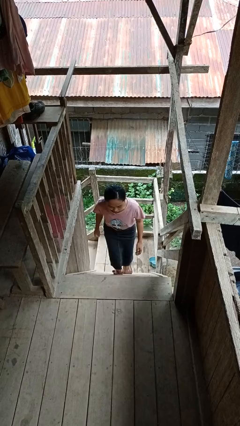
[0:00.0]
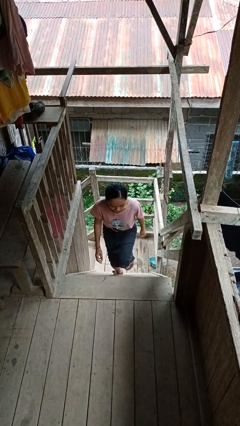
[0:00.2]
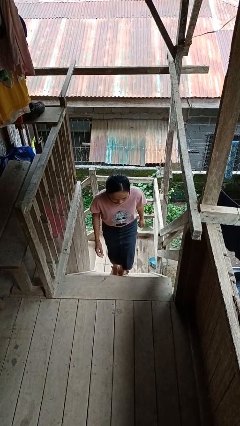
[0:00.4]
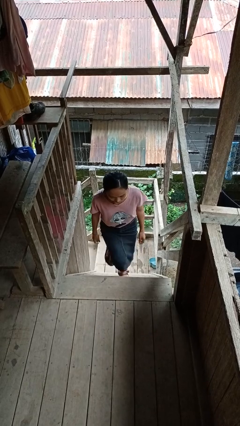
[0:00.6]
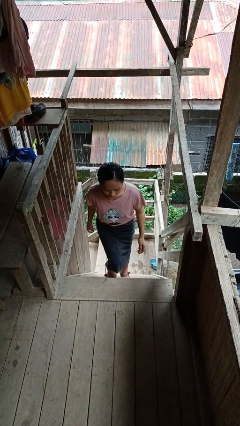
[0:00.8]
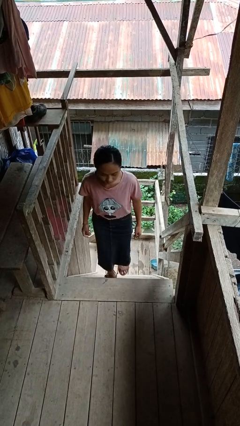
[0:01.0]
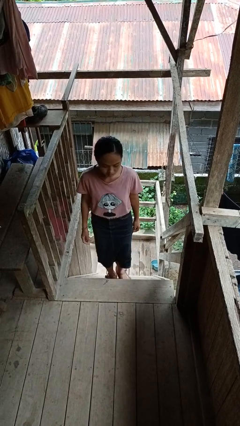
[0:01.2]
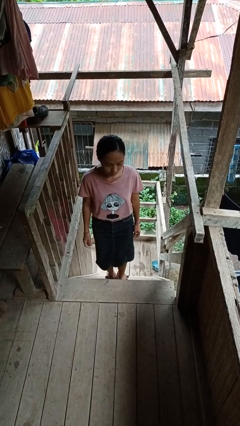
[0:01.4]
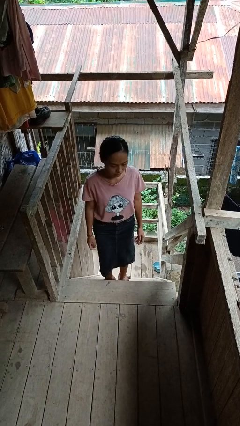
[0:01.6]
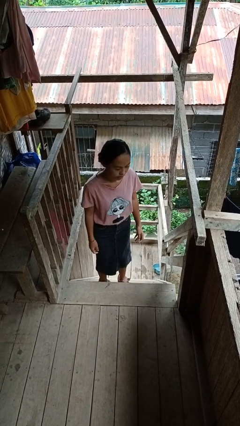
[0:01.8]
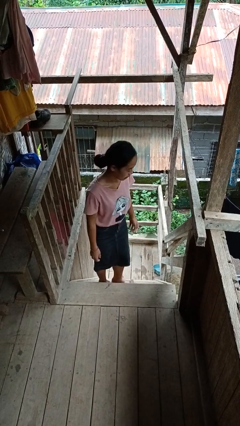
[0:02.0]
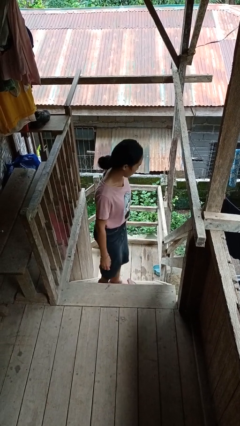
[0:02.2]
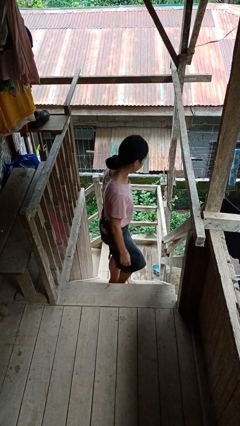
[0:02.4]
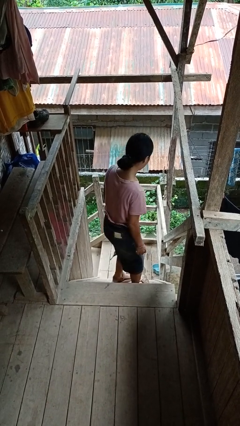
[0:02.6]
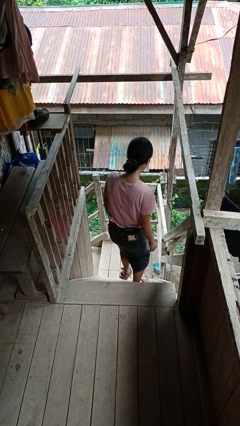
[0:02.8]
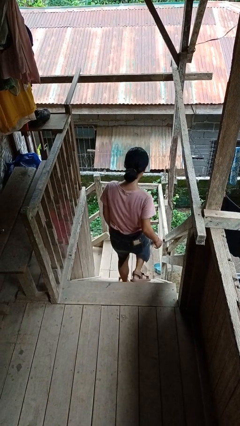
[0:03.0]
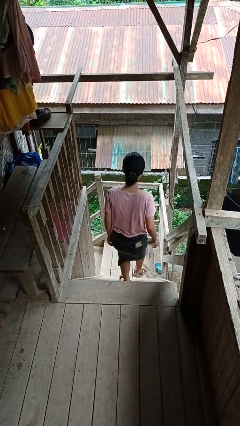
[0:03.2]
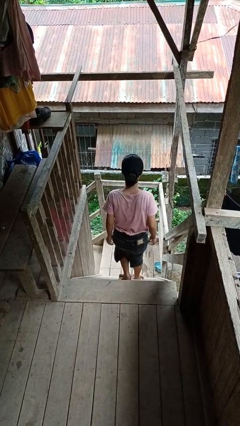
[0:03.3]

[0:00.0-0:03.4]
person climbs up stairs

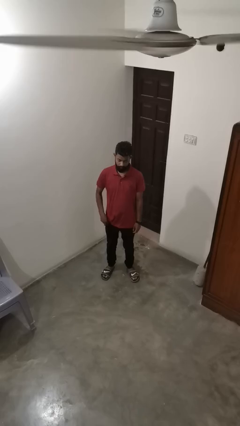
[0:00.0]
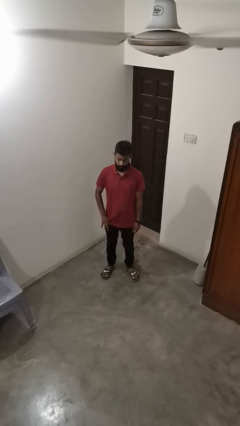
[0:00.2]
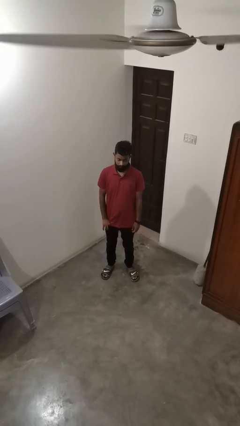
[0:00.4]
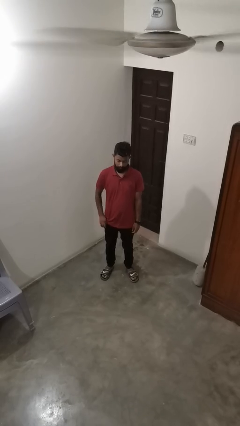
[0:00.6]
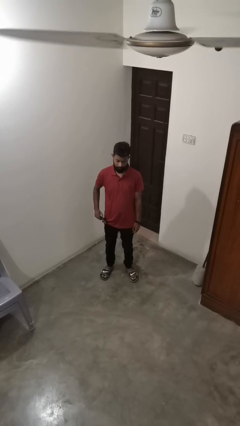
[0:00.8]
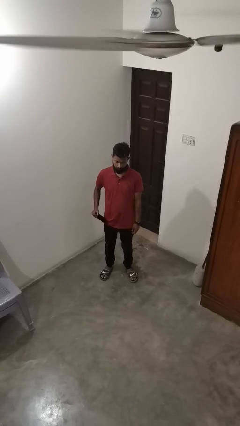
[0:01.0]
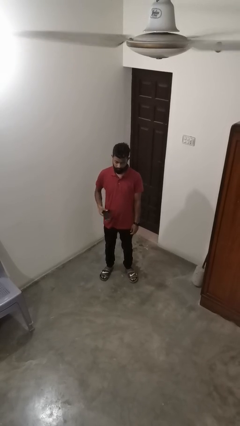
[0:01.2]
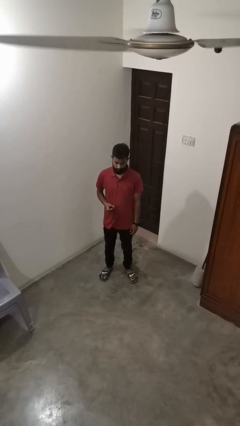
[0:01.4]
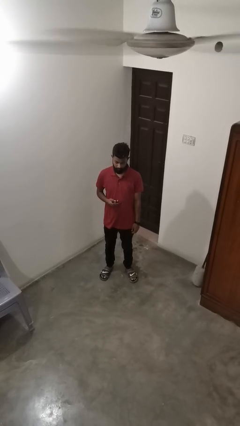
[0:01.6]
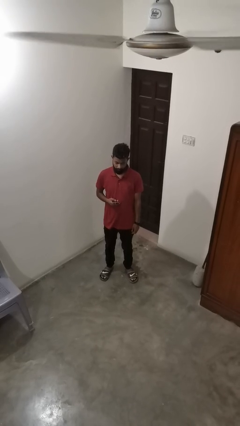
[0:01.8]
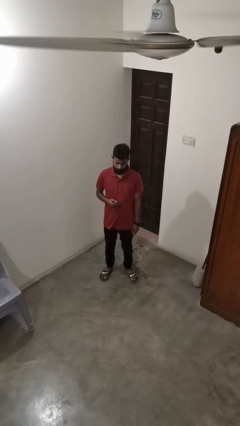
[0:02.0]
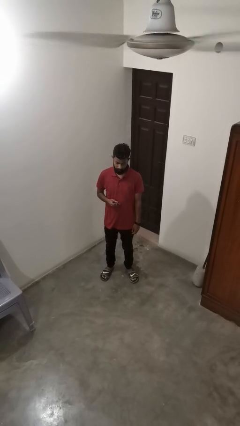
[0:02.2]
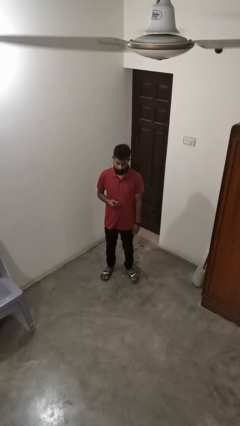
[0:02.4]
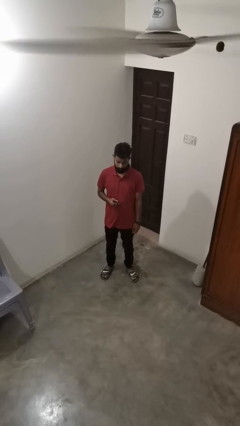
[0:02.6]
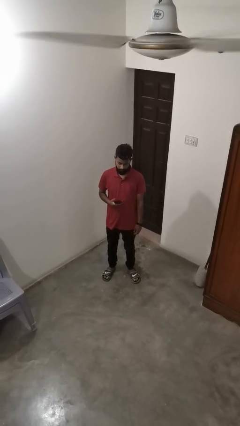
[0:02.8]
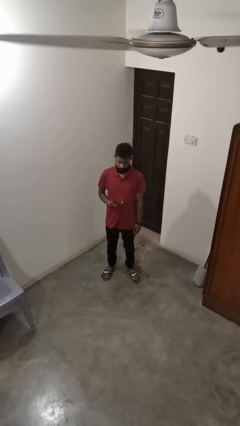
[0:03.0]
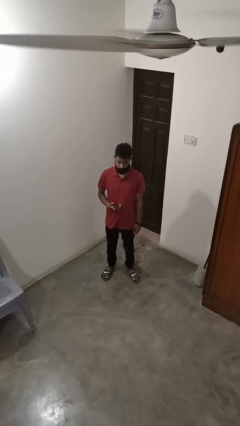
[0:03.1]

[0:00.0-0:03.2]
person takes phone from pocket

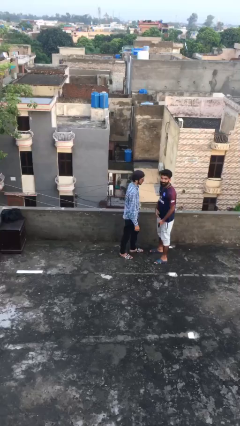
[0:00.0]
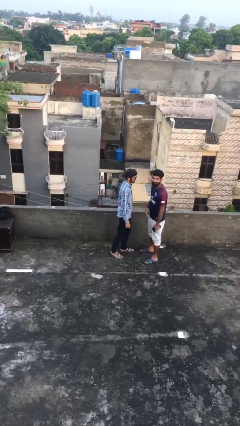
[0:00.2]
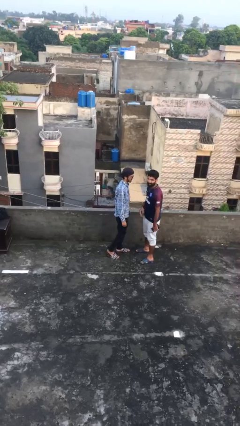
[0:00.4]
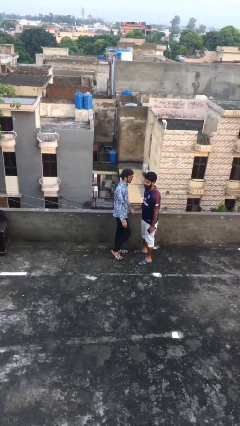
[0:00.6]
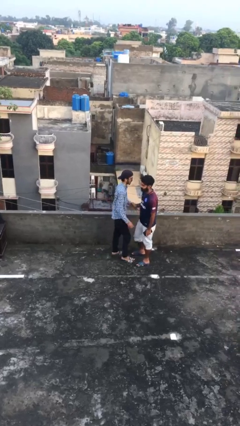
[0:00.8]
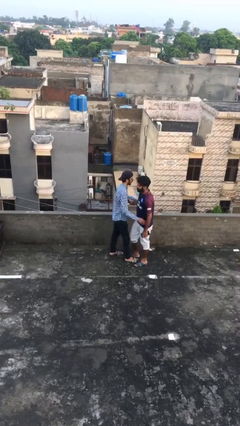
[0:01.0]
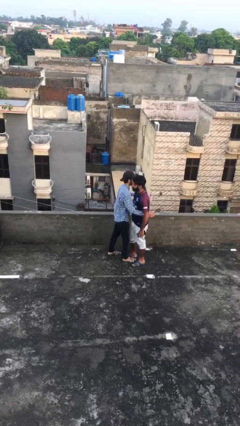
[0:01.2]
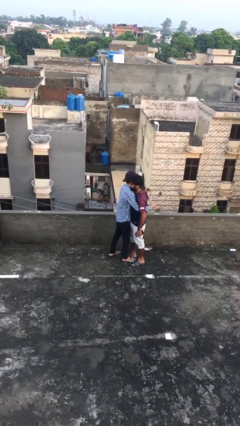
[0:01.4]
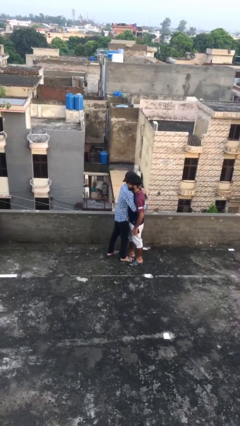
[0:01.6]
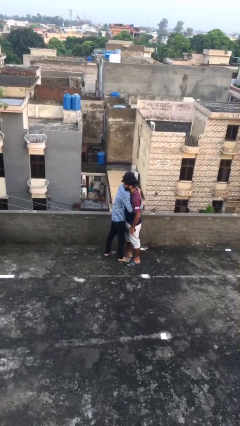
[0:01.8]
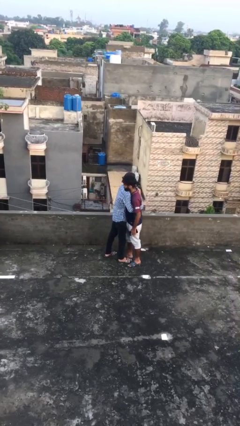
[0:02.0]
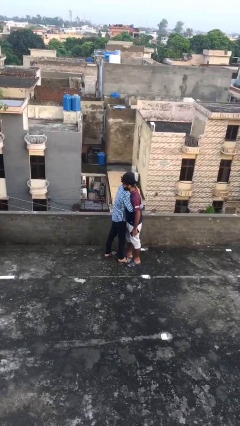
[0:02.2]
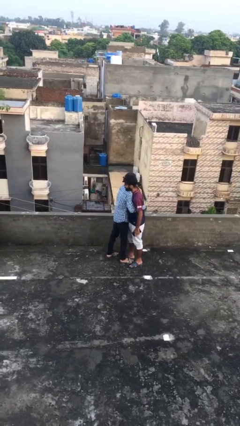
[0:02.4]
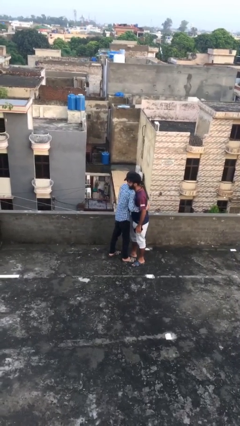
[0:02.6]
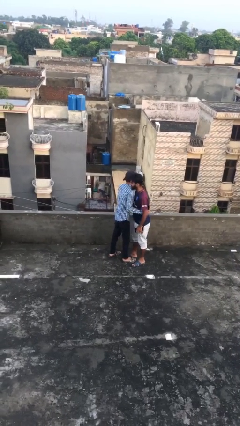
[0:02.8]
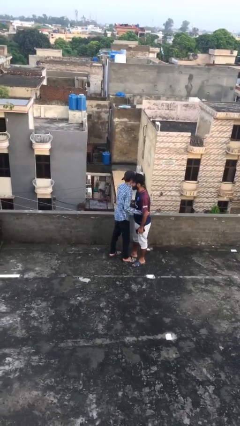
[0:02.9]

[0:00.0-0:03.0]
person embraces person

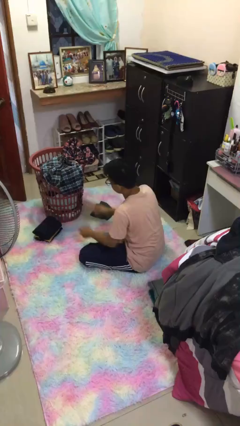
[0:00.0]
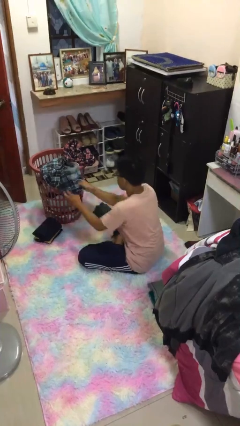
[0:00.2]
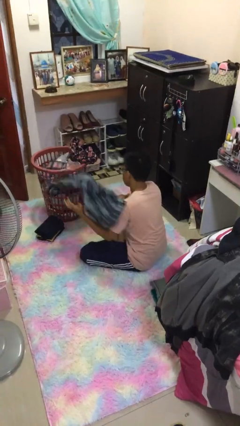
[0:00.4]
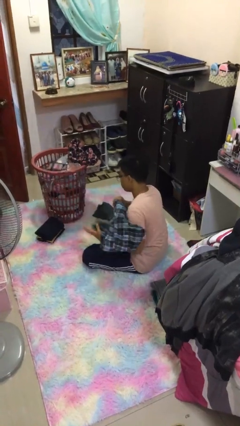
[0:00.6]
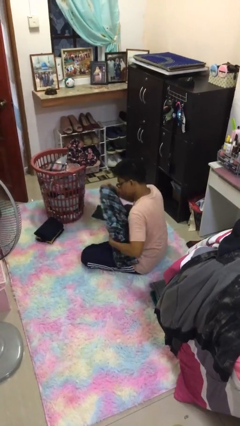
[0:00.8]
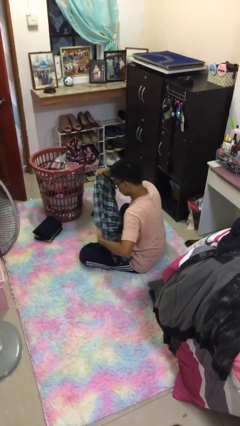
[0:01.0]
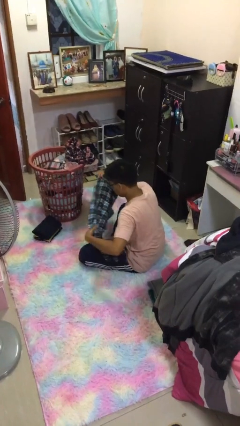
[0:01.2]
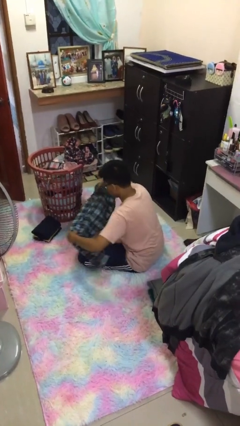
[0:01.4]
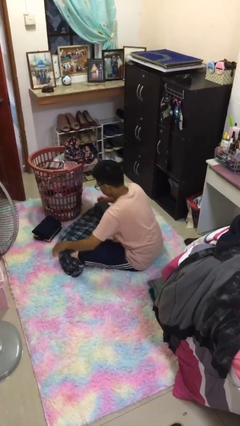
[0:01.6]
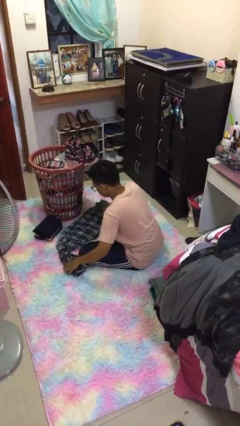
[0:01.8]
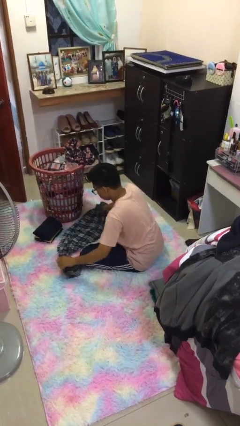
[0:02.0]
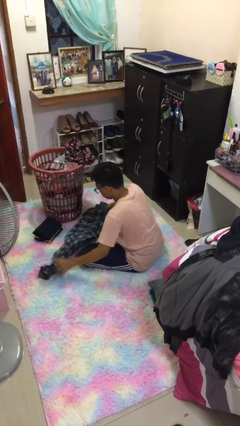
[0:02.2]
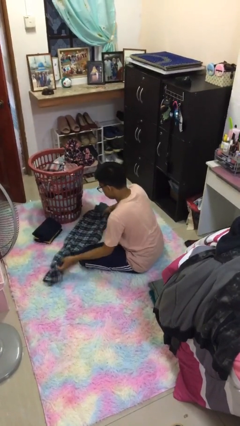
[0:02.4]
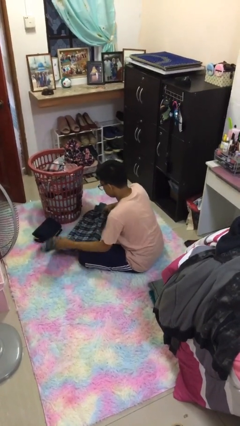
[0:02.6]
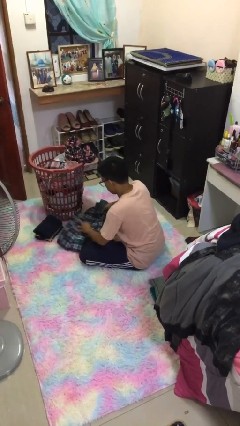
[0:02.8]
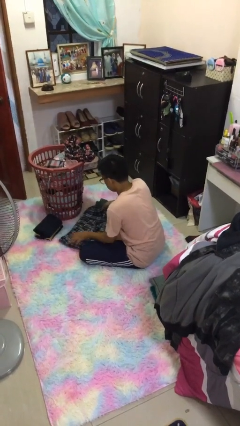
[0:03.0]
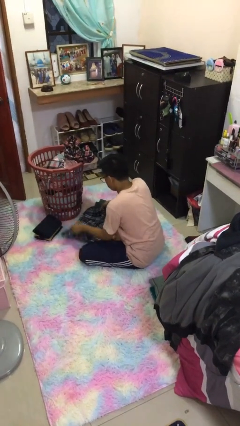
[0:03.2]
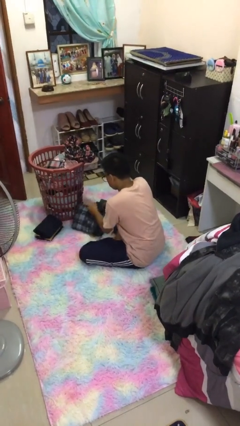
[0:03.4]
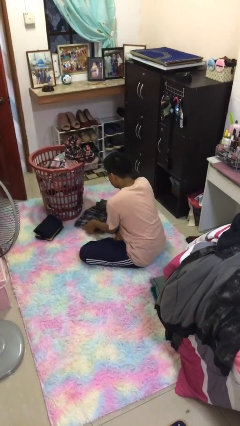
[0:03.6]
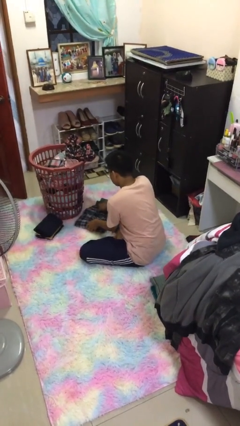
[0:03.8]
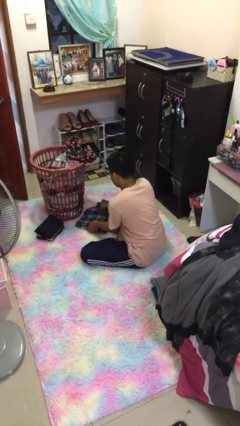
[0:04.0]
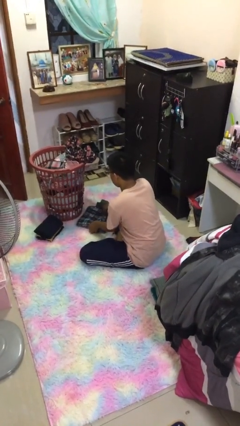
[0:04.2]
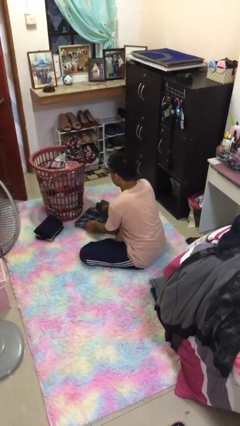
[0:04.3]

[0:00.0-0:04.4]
person folds pants

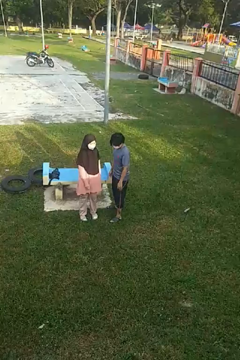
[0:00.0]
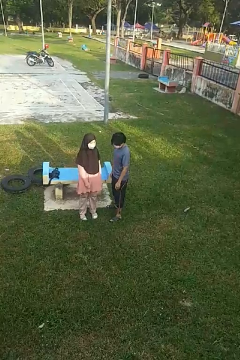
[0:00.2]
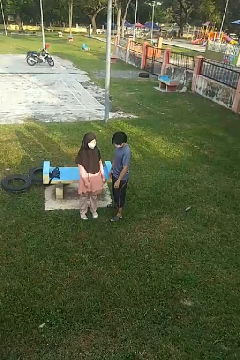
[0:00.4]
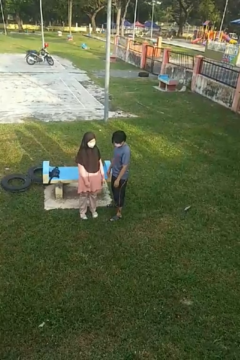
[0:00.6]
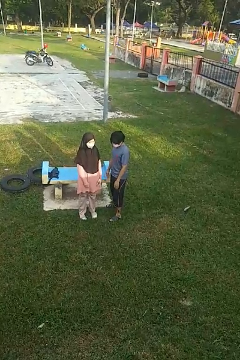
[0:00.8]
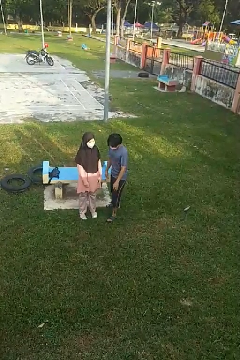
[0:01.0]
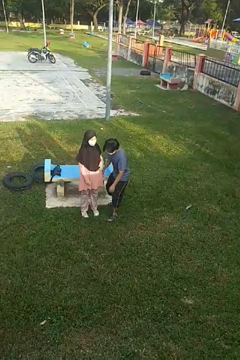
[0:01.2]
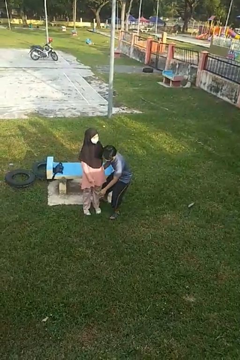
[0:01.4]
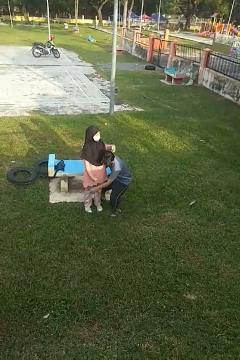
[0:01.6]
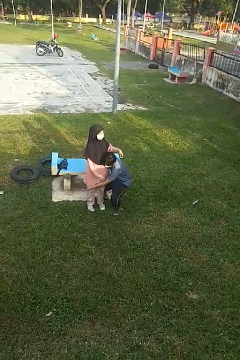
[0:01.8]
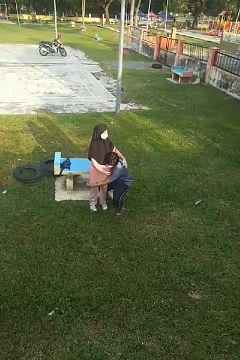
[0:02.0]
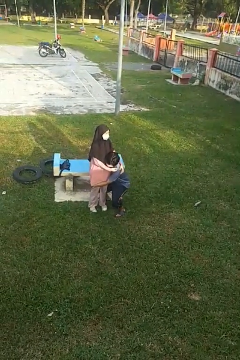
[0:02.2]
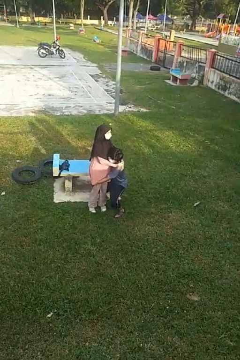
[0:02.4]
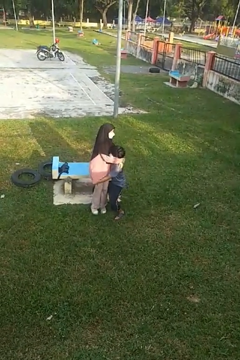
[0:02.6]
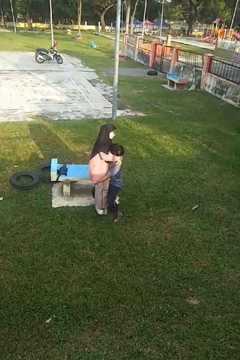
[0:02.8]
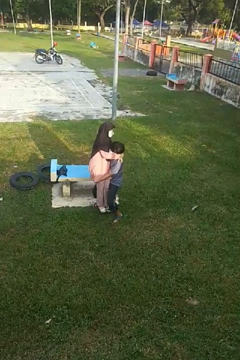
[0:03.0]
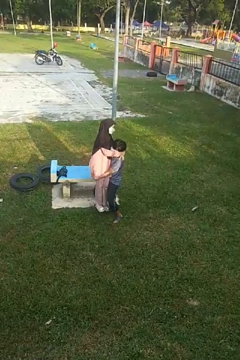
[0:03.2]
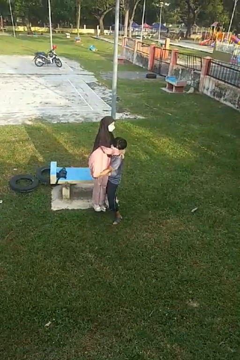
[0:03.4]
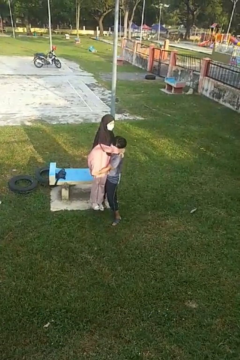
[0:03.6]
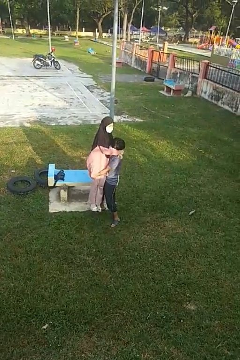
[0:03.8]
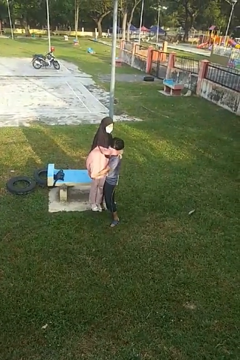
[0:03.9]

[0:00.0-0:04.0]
person picks up person

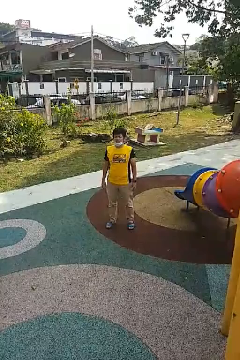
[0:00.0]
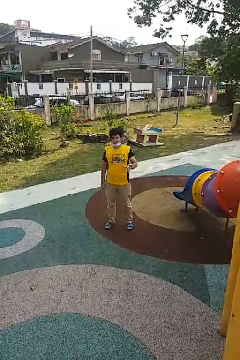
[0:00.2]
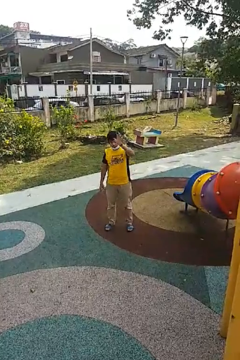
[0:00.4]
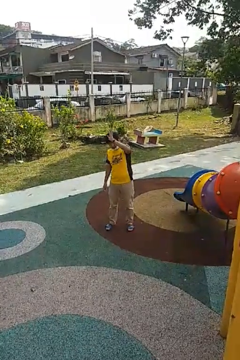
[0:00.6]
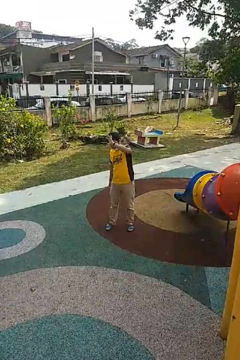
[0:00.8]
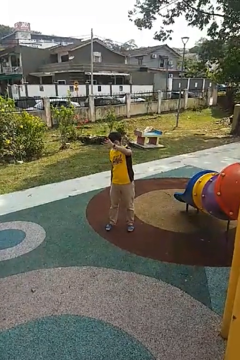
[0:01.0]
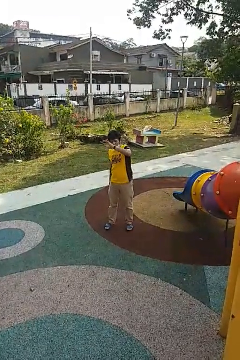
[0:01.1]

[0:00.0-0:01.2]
person waves at person
